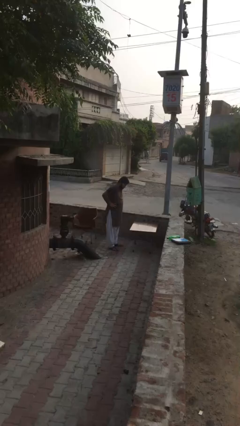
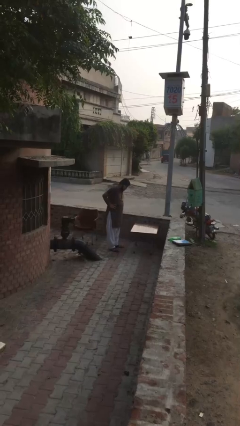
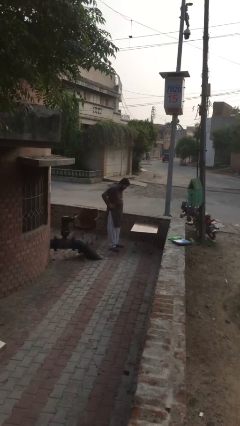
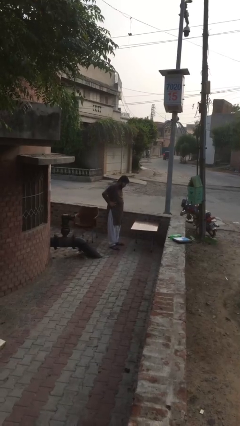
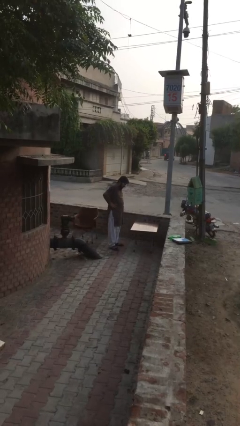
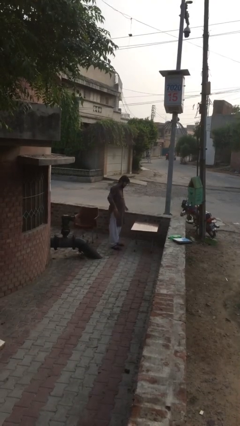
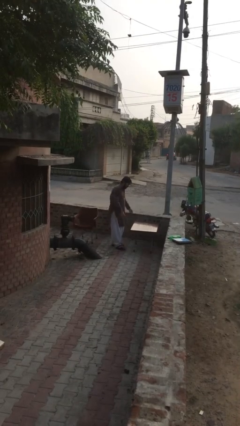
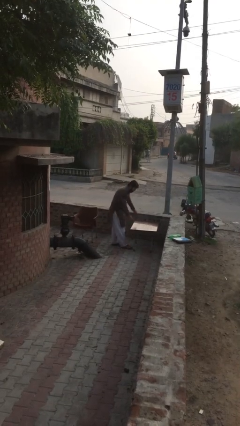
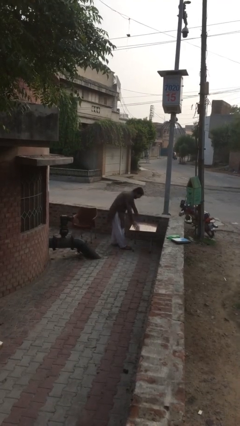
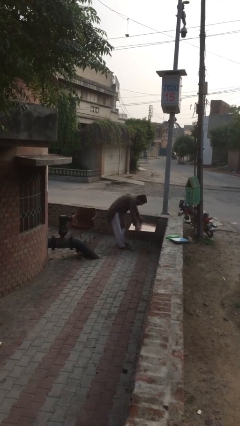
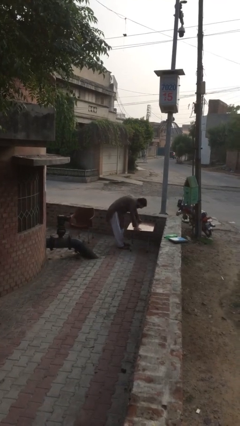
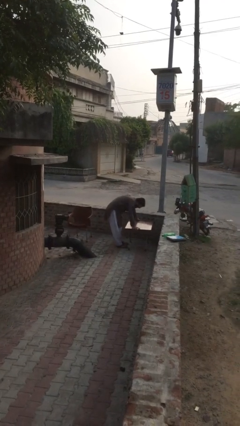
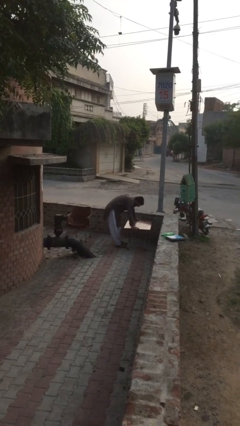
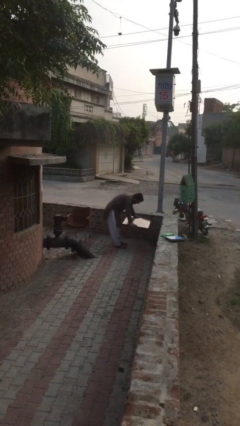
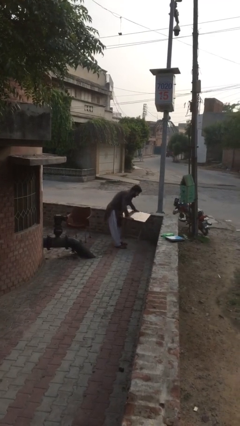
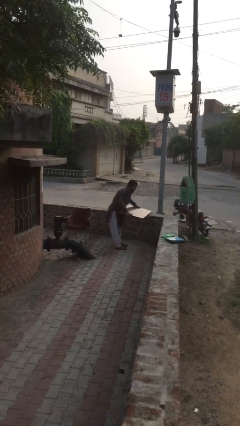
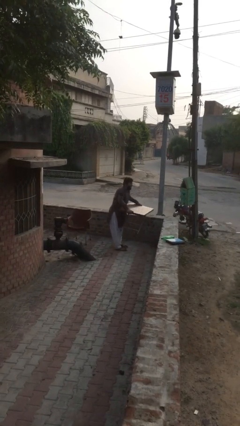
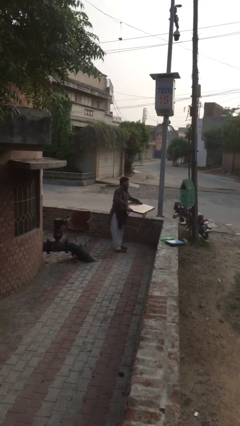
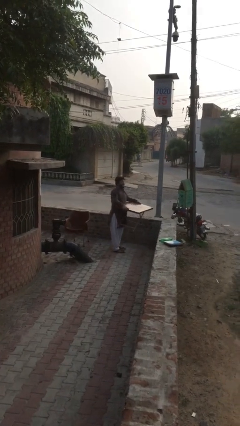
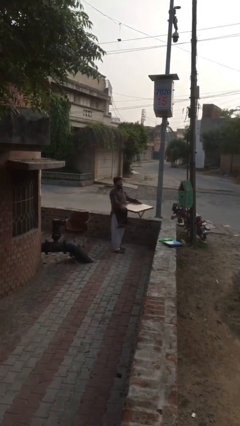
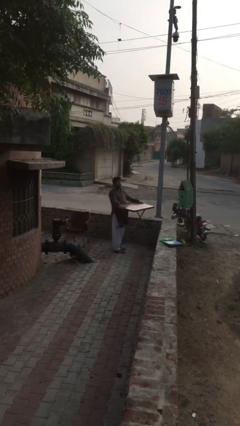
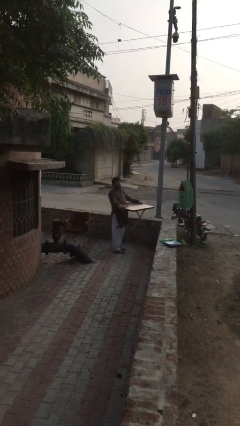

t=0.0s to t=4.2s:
person picks up object from floor

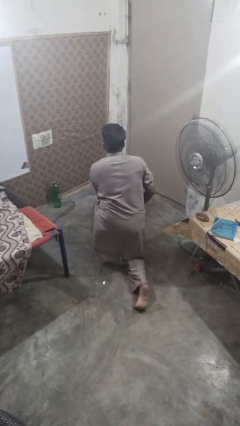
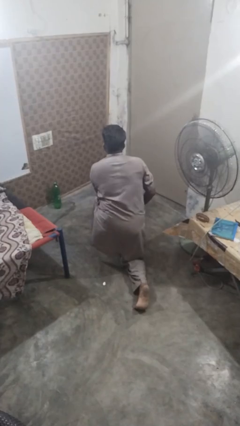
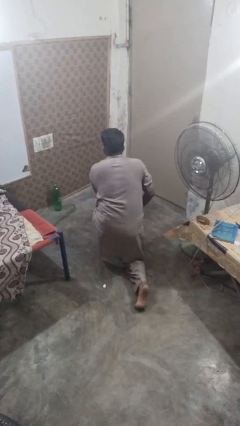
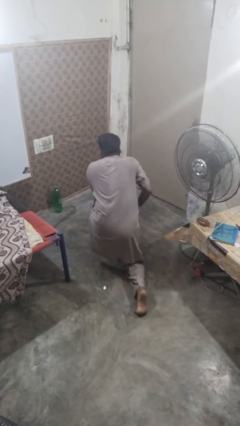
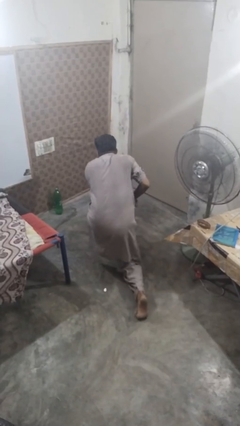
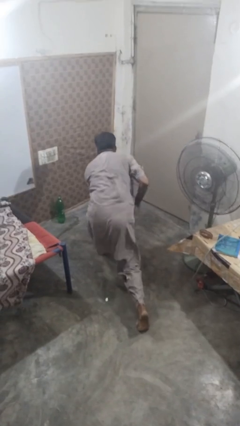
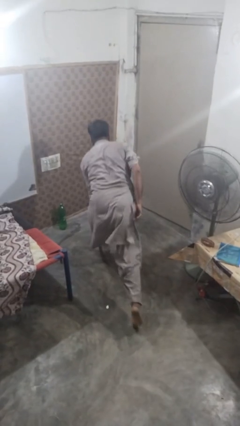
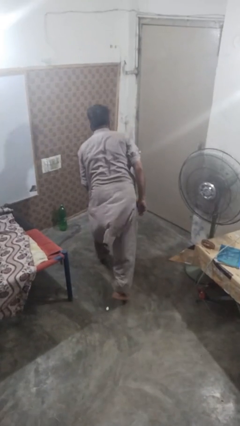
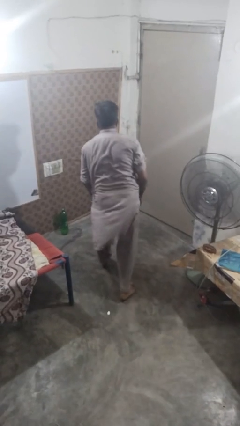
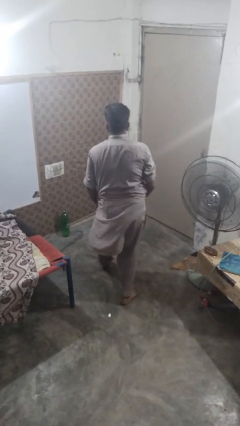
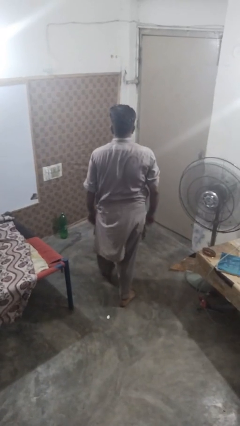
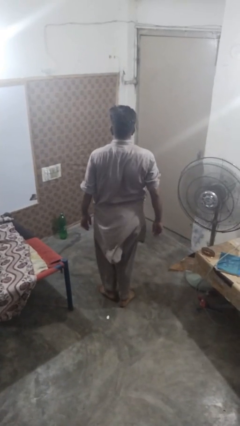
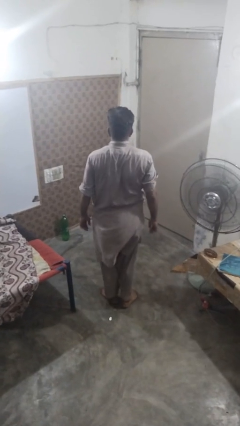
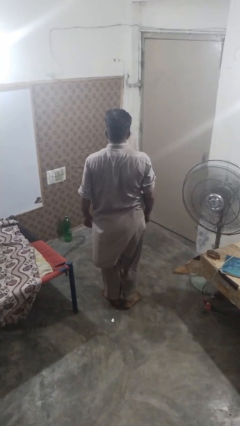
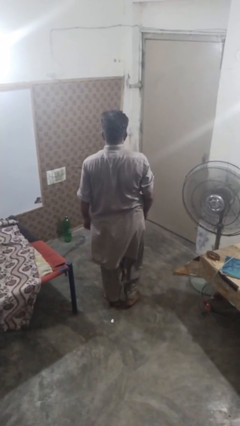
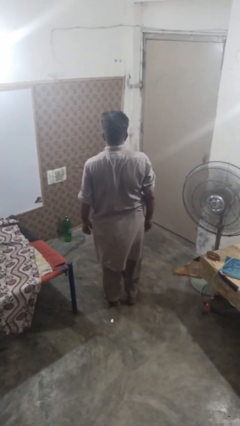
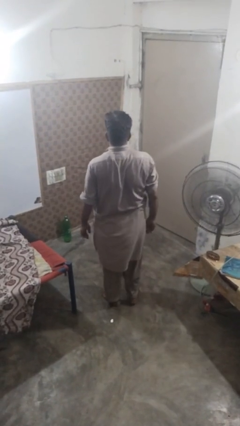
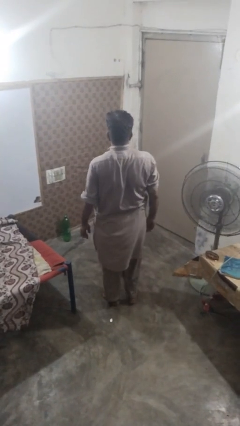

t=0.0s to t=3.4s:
person stands up from floor

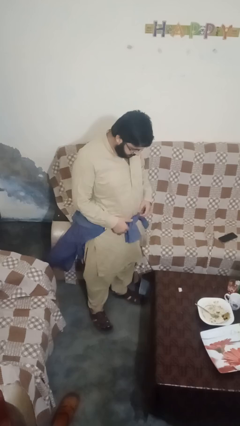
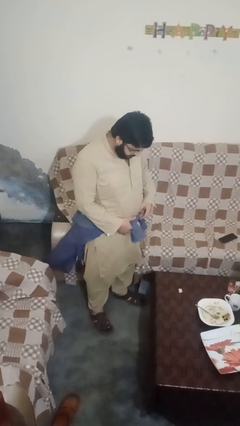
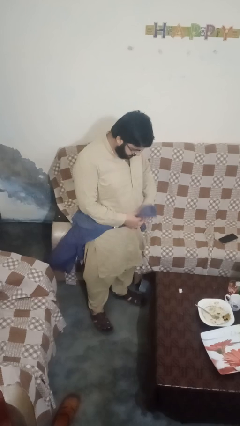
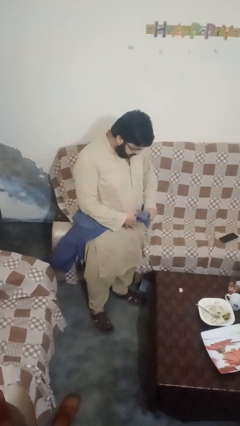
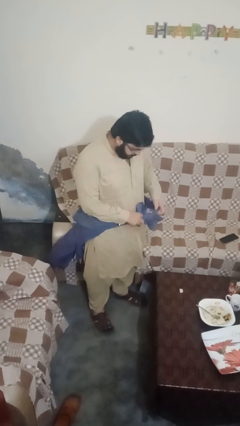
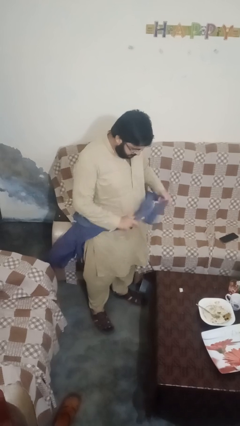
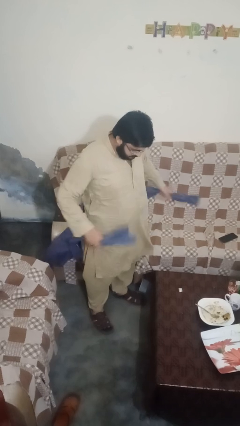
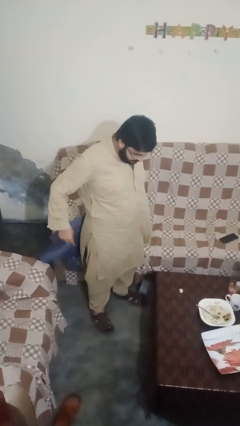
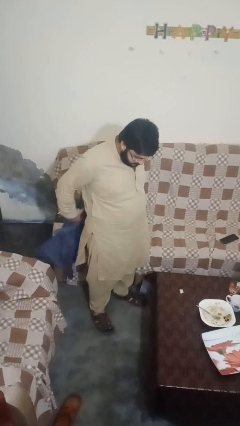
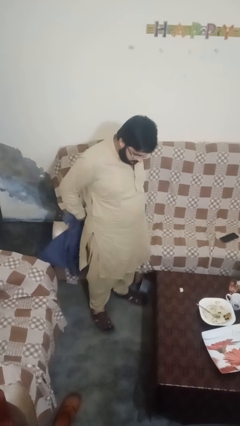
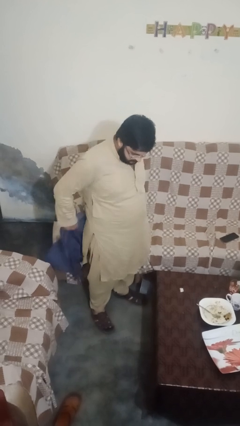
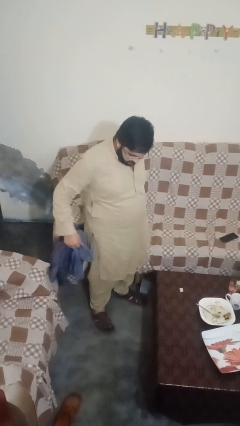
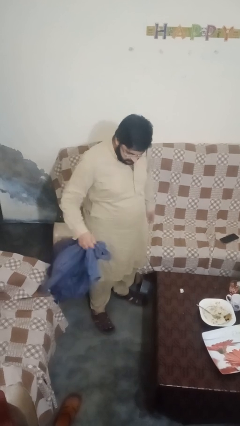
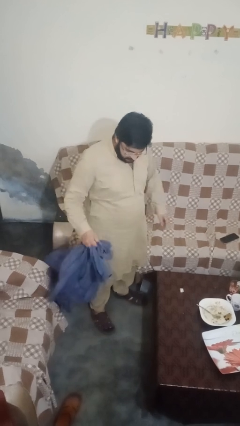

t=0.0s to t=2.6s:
person unties jacket around waist

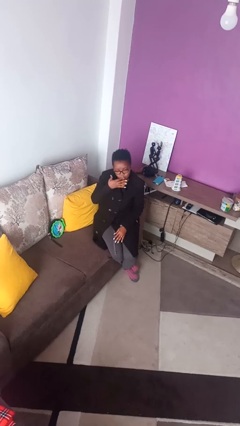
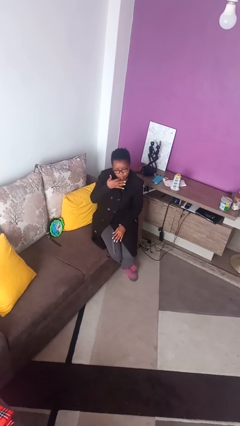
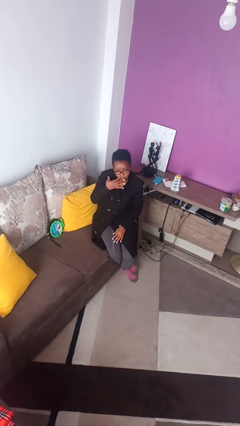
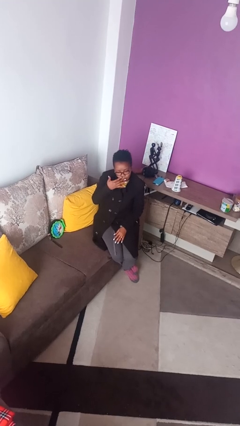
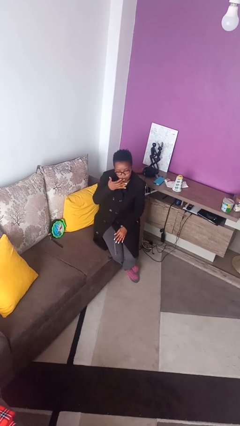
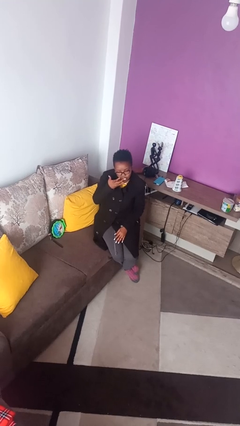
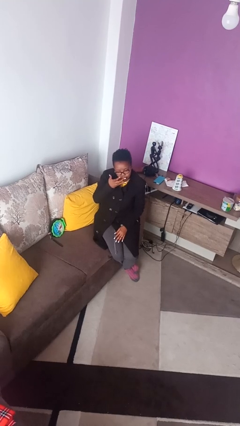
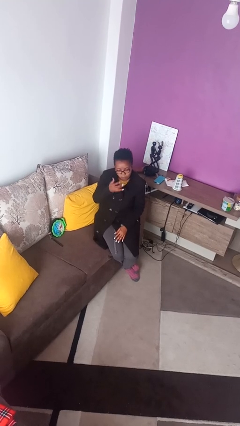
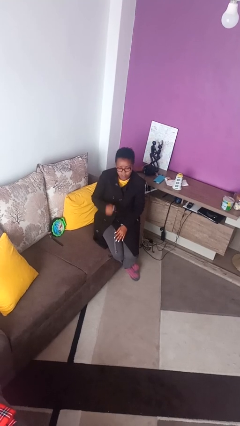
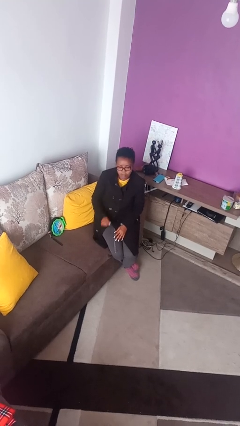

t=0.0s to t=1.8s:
person licks fingers

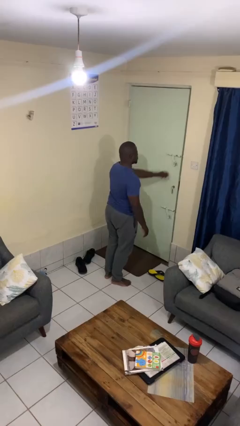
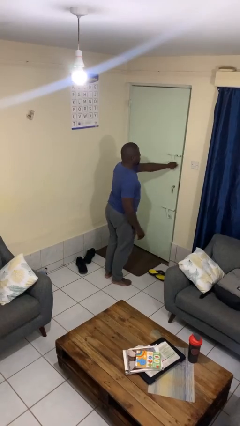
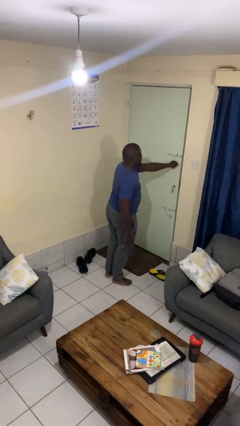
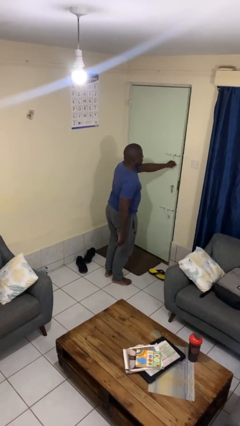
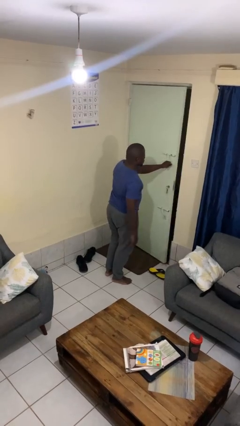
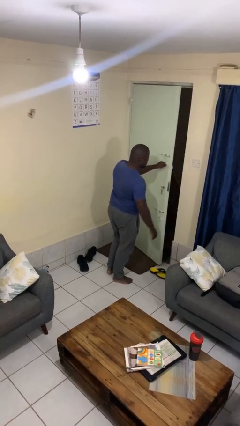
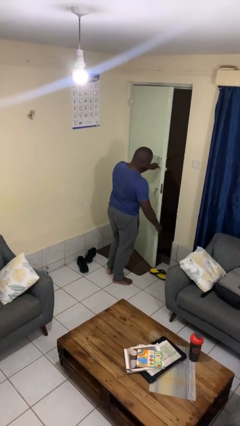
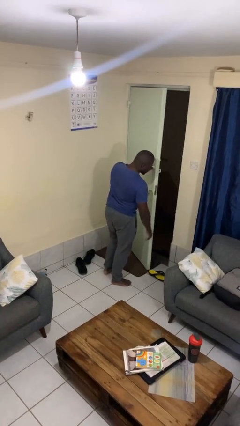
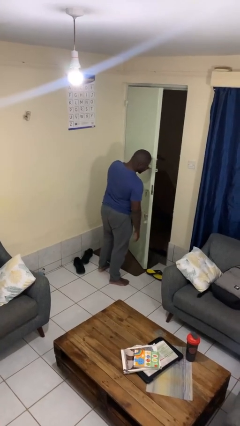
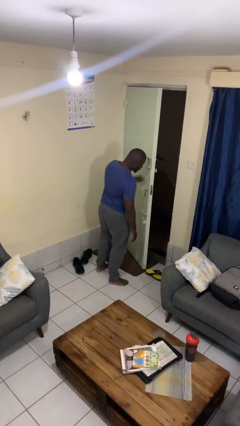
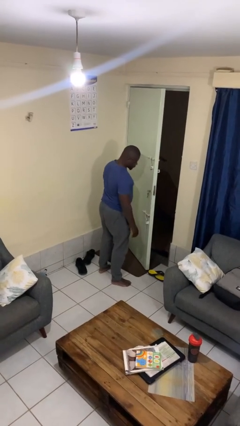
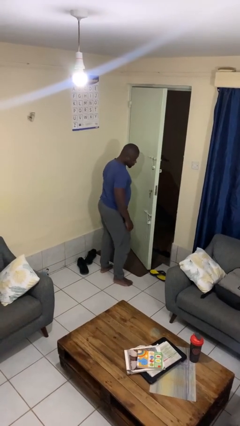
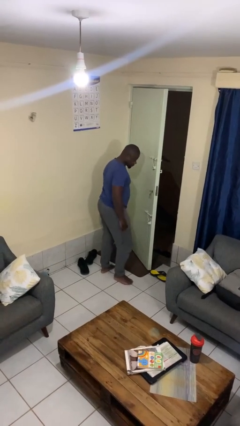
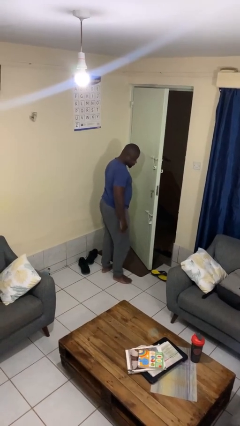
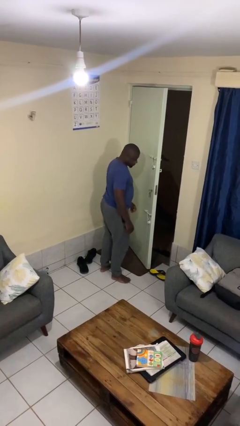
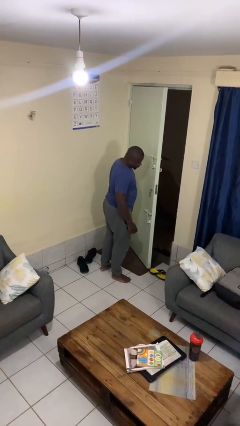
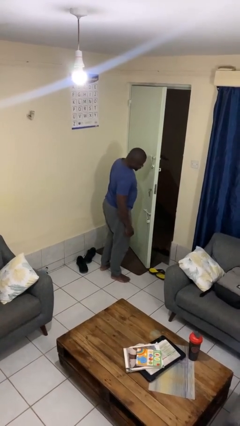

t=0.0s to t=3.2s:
person opens facility door

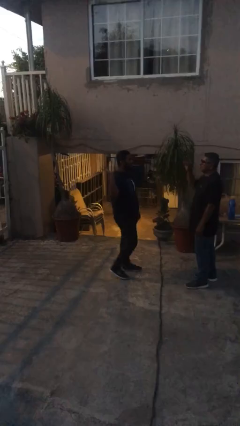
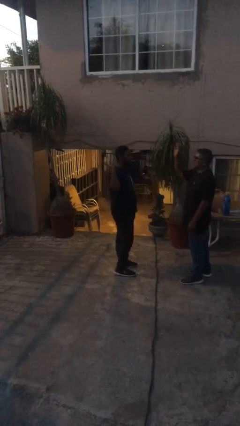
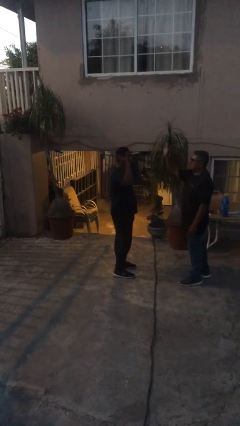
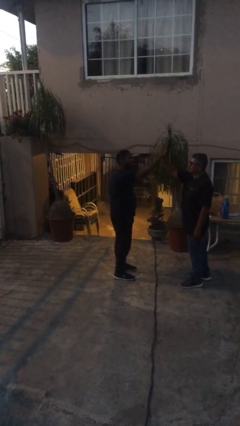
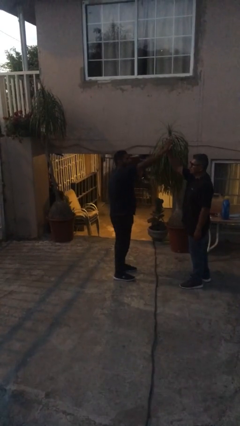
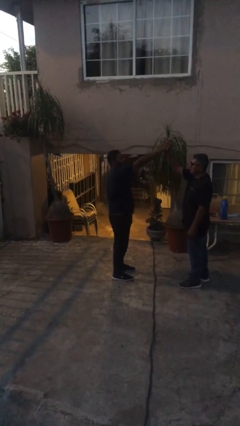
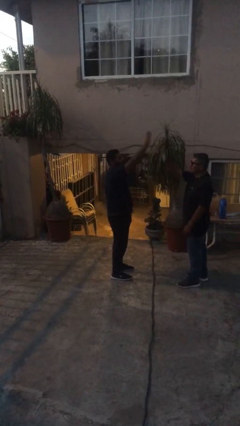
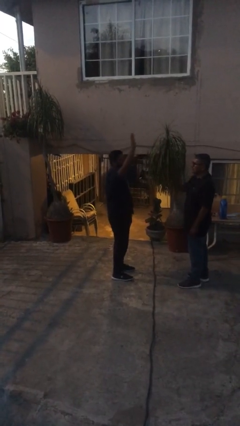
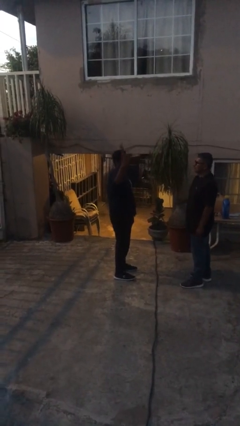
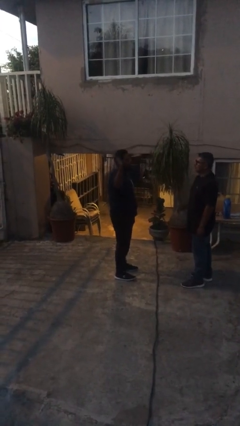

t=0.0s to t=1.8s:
person highfives hand

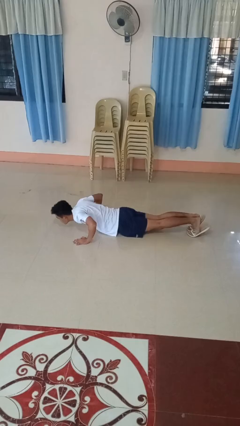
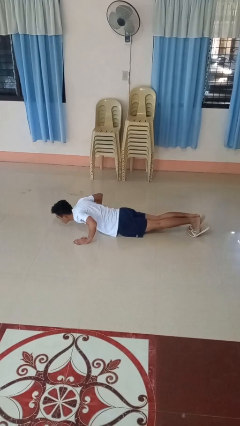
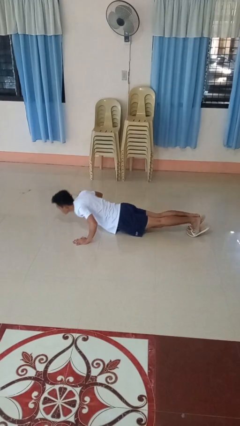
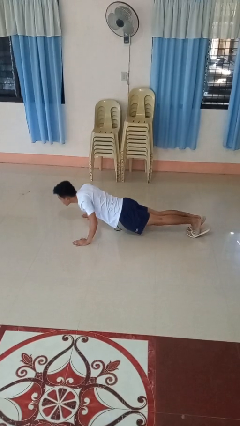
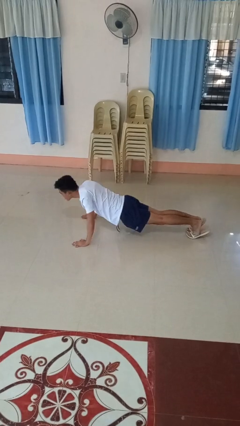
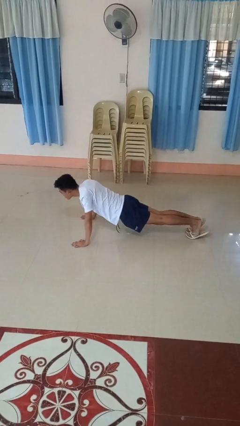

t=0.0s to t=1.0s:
person exercises with pushup
